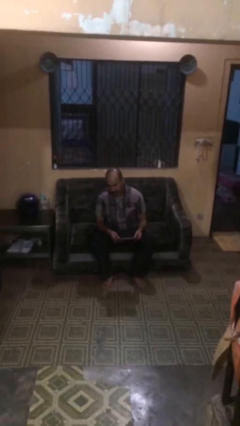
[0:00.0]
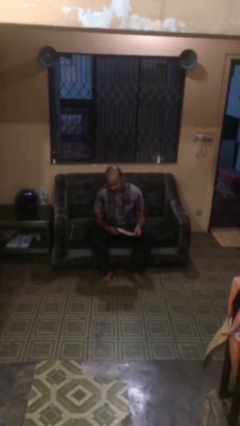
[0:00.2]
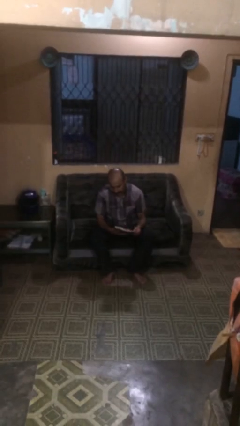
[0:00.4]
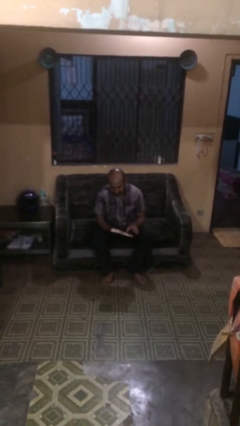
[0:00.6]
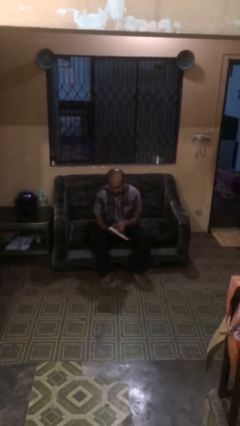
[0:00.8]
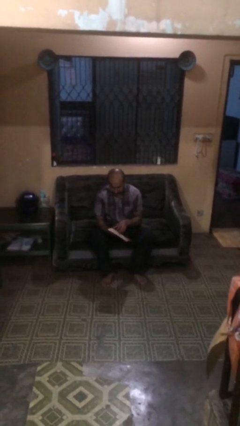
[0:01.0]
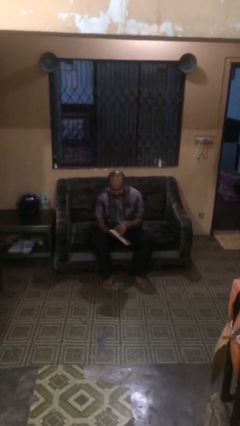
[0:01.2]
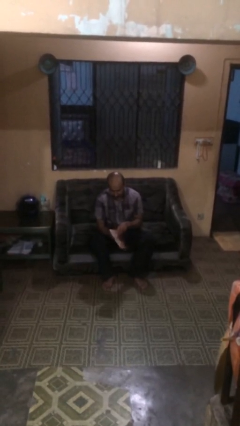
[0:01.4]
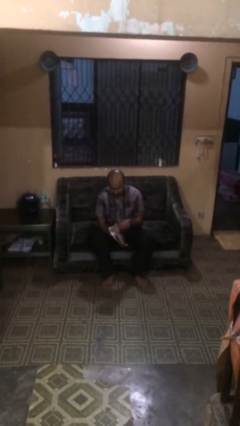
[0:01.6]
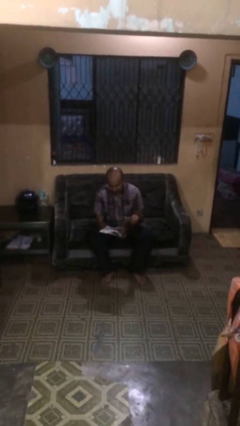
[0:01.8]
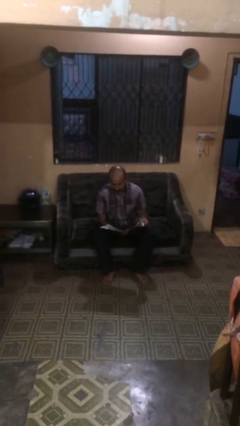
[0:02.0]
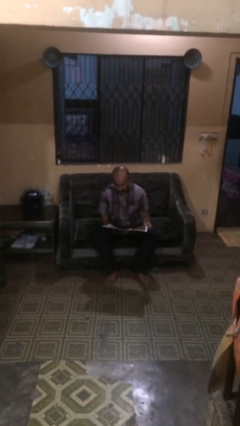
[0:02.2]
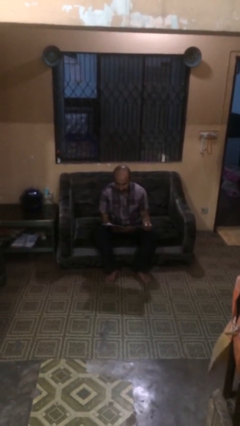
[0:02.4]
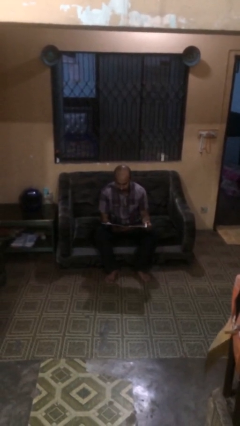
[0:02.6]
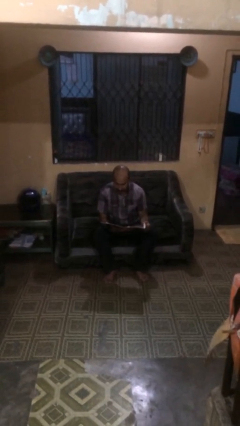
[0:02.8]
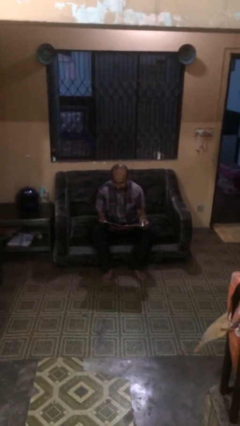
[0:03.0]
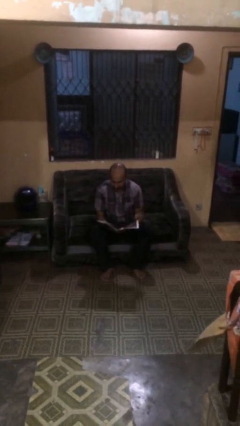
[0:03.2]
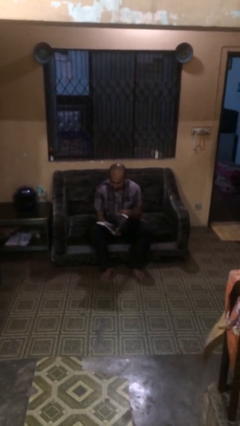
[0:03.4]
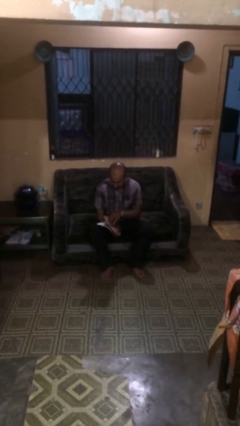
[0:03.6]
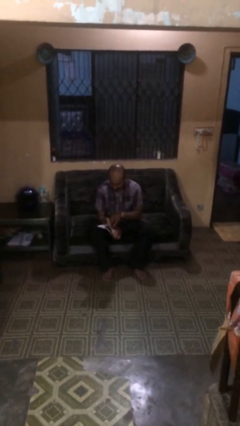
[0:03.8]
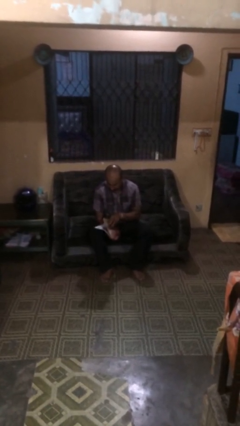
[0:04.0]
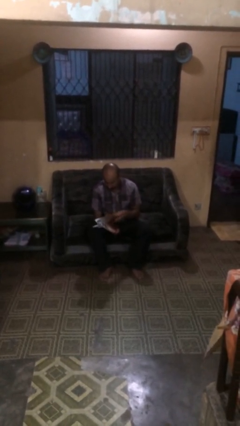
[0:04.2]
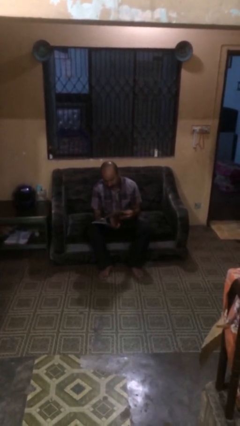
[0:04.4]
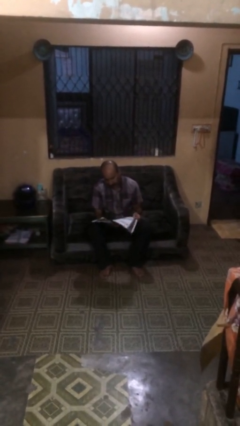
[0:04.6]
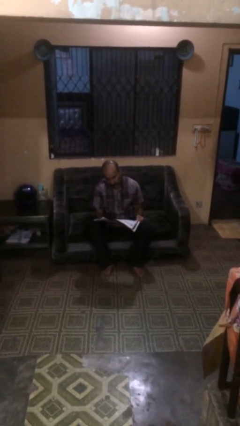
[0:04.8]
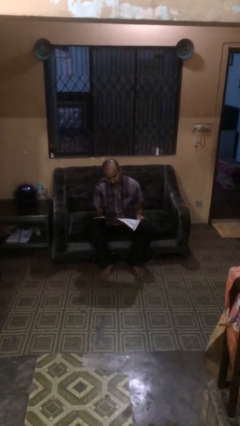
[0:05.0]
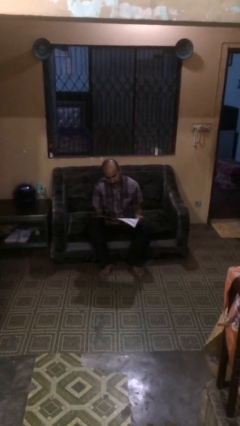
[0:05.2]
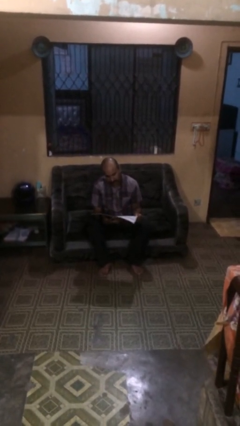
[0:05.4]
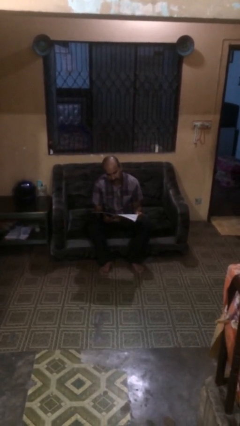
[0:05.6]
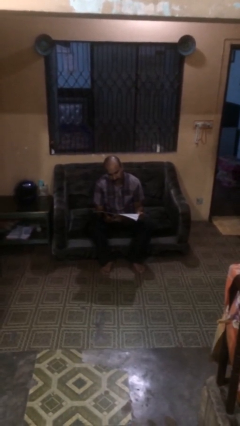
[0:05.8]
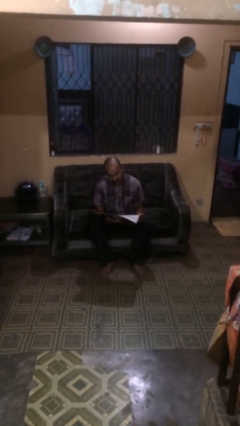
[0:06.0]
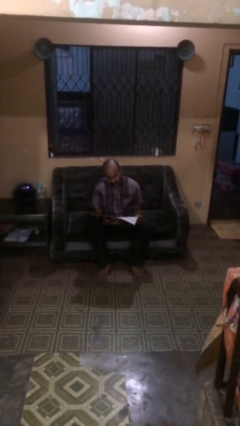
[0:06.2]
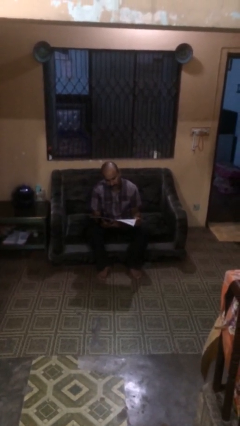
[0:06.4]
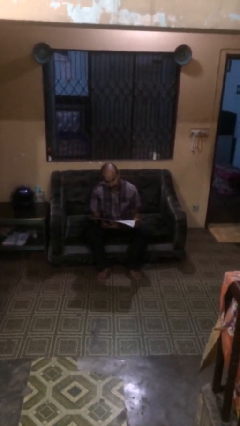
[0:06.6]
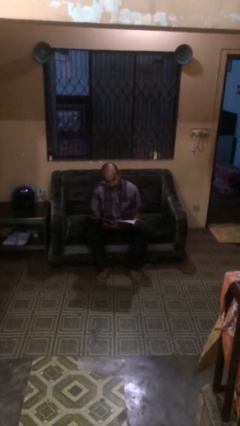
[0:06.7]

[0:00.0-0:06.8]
person reads document

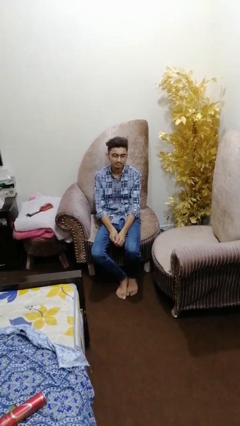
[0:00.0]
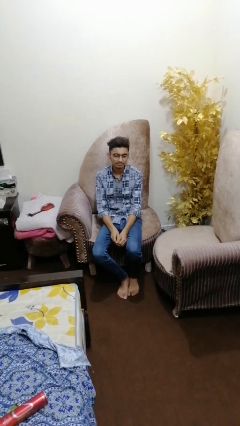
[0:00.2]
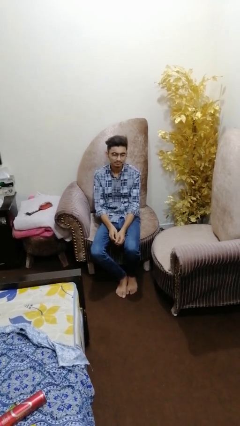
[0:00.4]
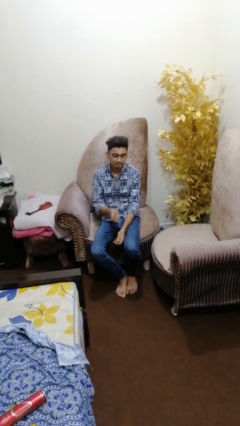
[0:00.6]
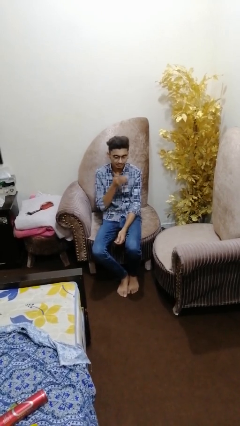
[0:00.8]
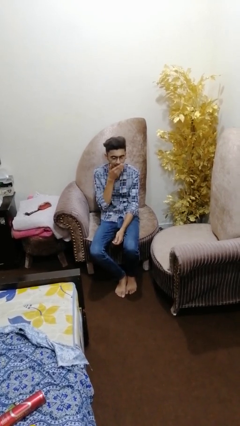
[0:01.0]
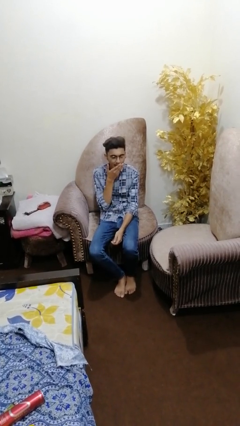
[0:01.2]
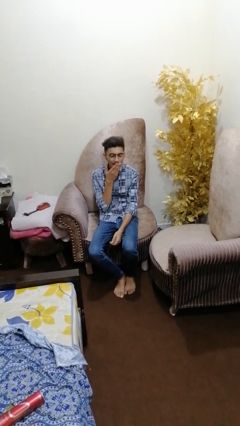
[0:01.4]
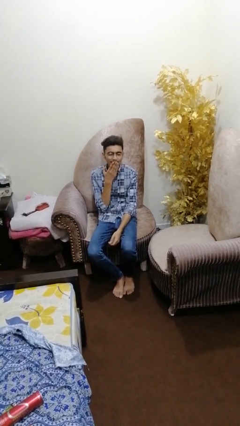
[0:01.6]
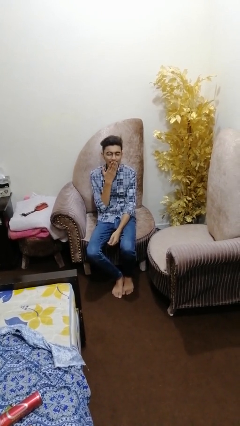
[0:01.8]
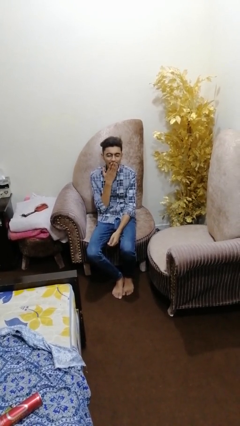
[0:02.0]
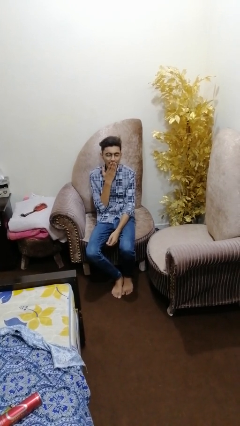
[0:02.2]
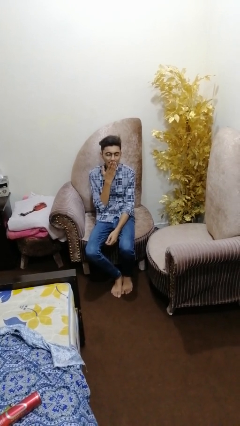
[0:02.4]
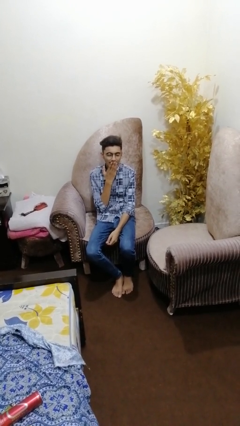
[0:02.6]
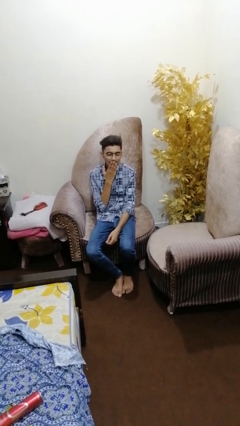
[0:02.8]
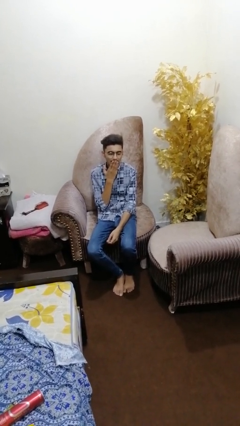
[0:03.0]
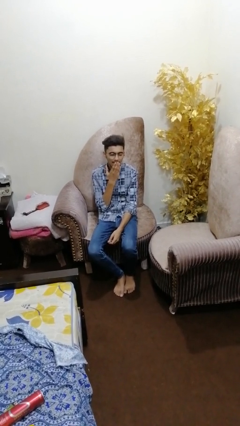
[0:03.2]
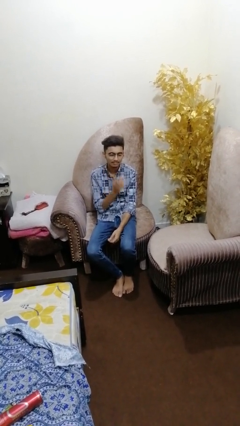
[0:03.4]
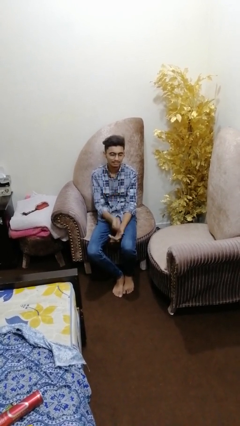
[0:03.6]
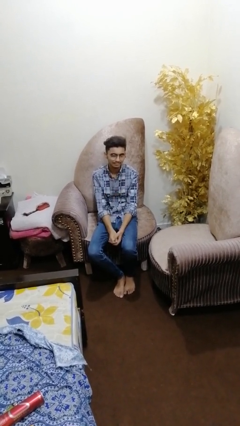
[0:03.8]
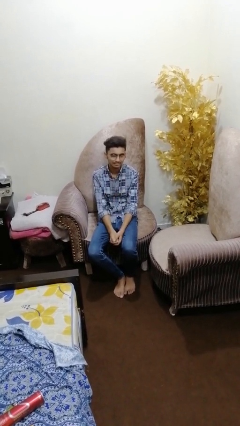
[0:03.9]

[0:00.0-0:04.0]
person yawns

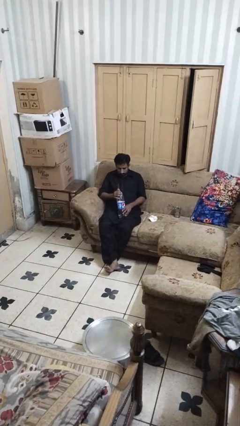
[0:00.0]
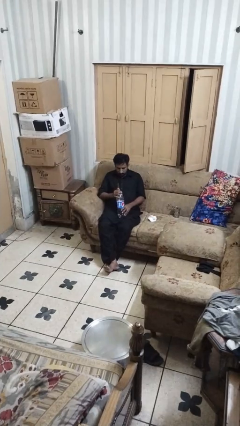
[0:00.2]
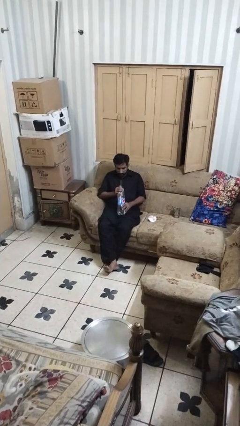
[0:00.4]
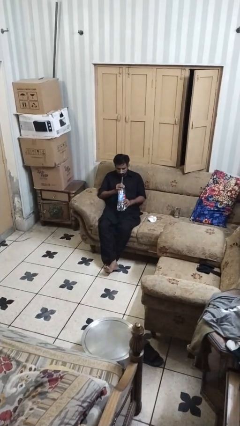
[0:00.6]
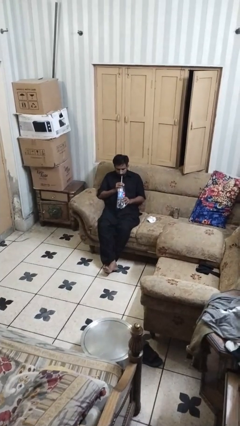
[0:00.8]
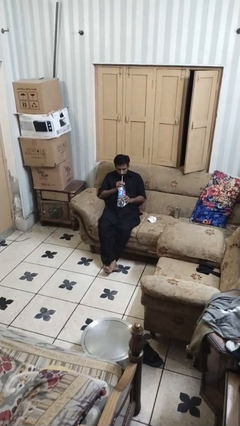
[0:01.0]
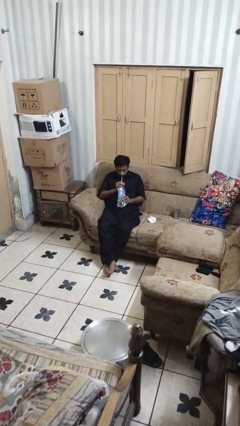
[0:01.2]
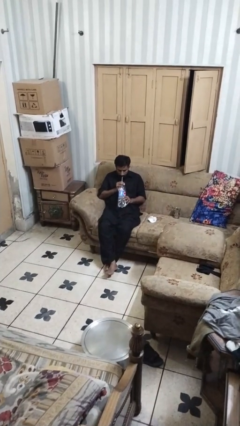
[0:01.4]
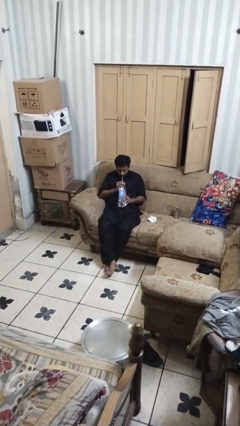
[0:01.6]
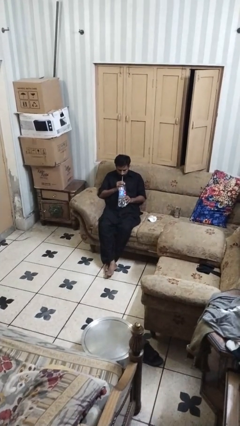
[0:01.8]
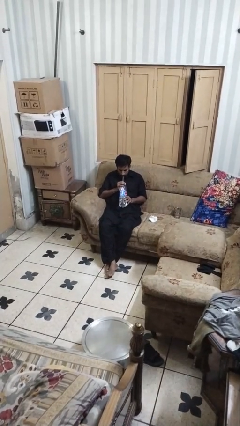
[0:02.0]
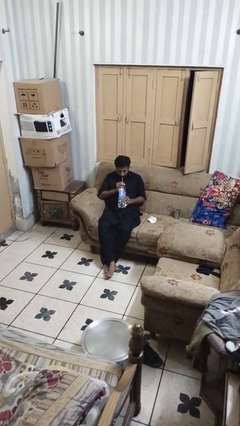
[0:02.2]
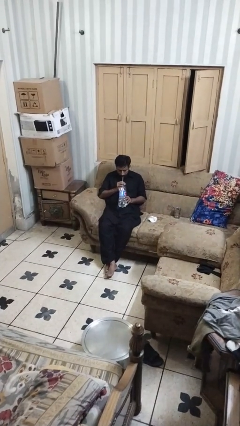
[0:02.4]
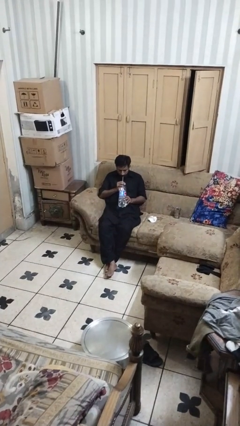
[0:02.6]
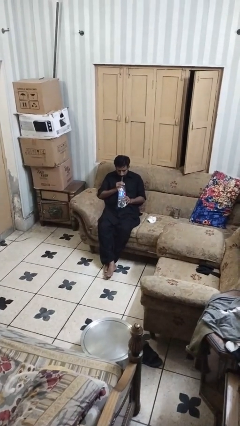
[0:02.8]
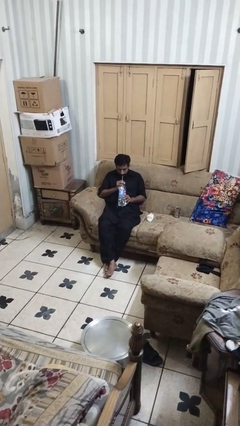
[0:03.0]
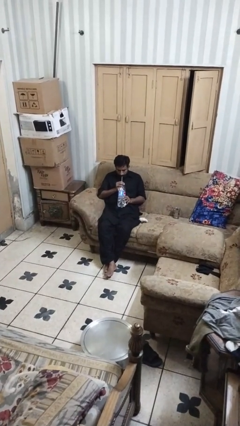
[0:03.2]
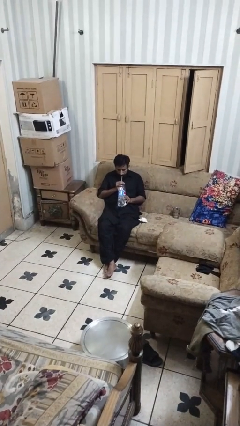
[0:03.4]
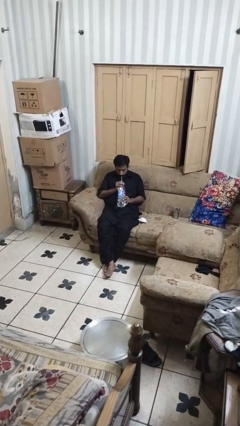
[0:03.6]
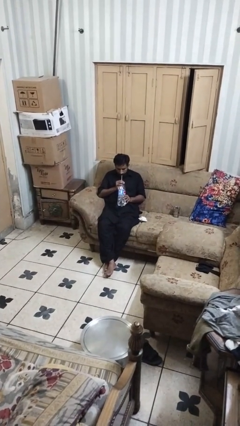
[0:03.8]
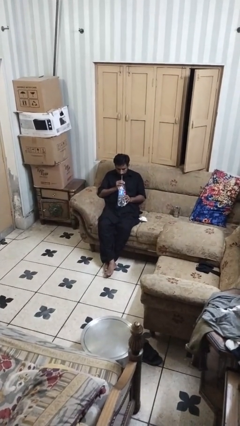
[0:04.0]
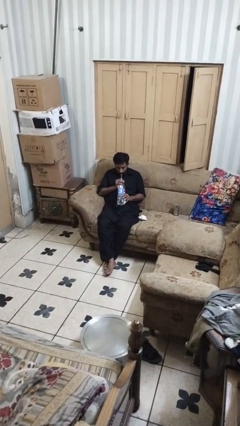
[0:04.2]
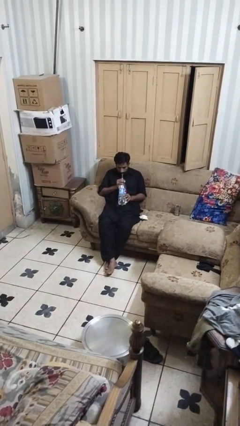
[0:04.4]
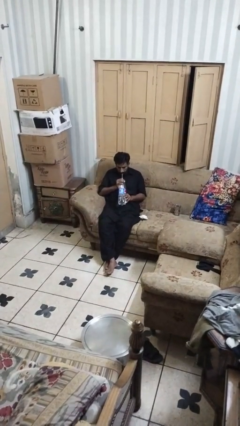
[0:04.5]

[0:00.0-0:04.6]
person drinks from straw

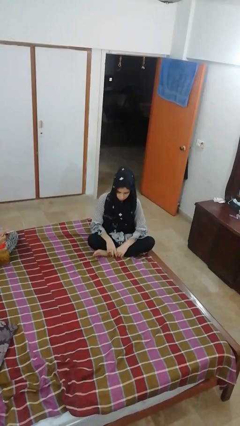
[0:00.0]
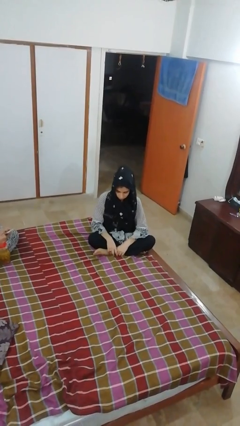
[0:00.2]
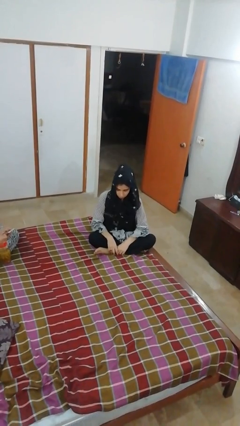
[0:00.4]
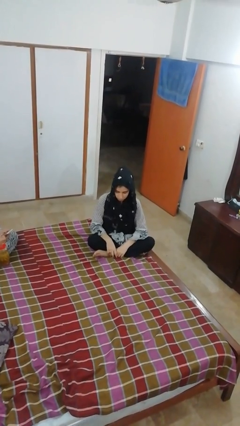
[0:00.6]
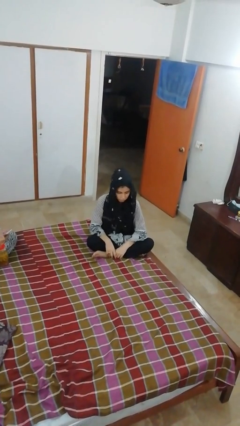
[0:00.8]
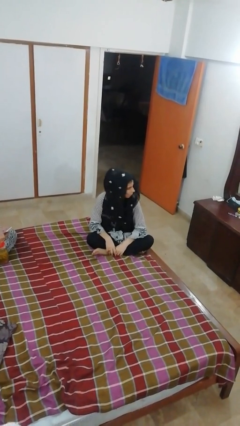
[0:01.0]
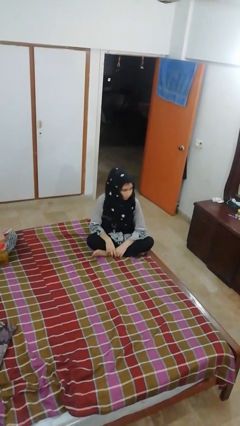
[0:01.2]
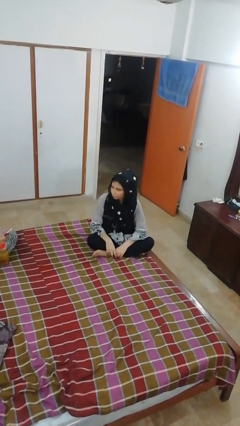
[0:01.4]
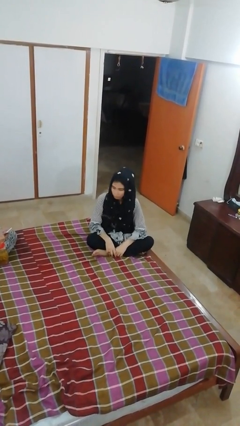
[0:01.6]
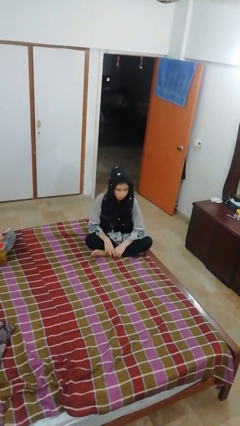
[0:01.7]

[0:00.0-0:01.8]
person shakes head

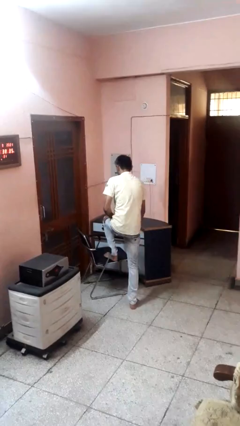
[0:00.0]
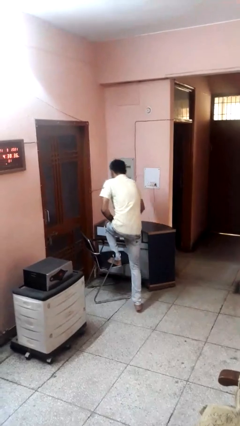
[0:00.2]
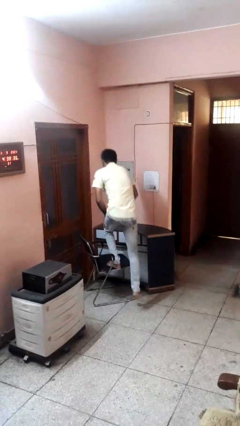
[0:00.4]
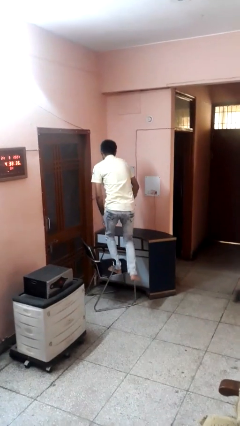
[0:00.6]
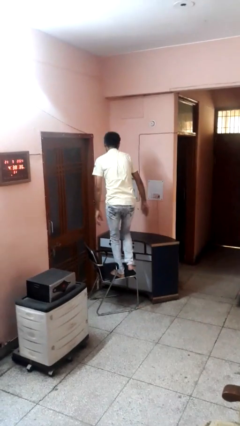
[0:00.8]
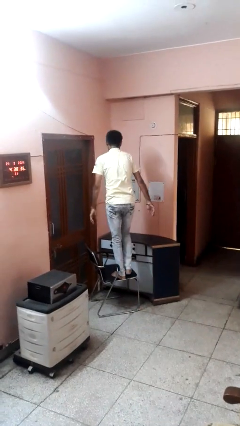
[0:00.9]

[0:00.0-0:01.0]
person climbs on chair
